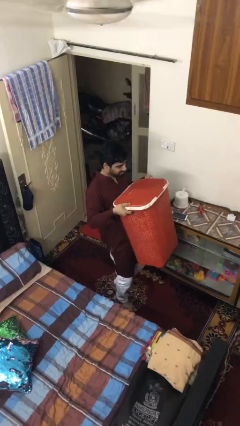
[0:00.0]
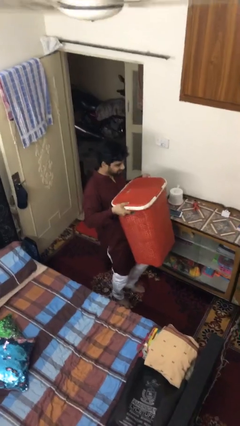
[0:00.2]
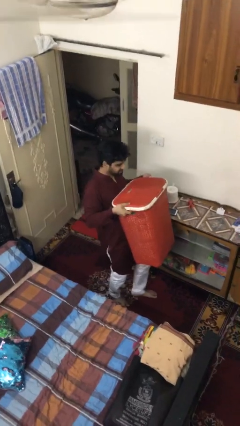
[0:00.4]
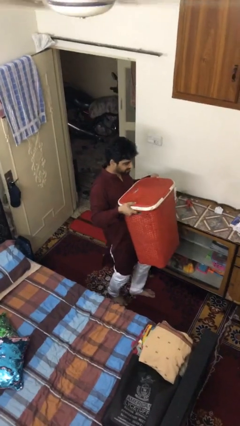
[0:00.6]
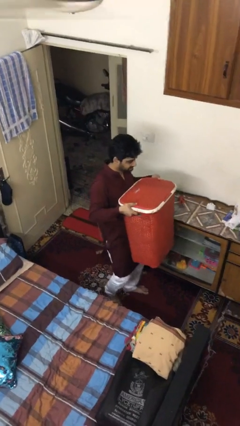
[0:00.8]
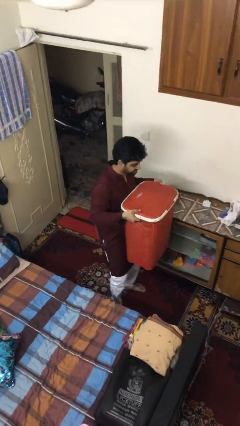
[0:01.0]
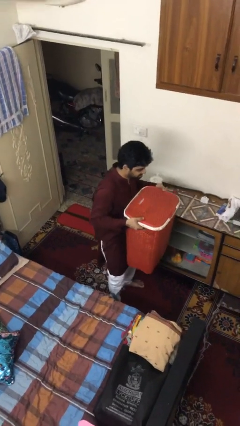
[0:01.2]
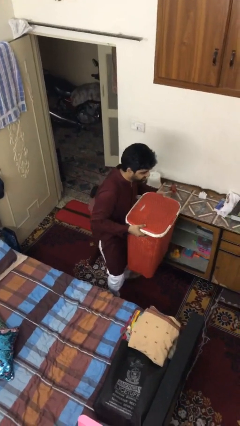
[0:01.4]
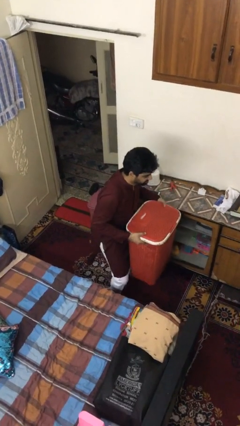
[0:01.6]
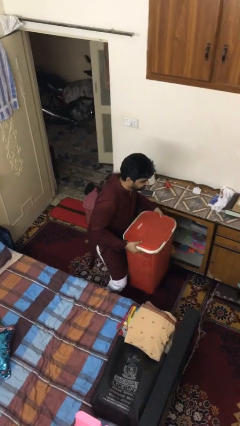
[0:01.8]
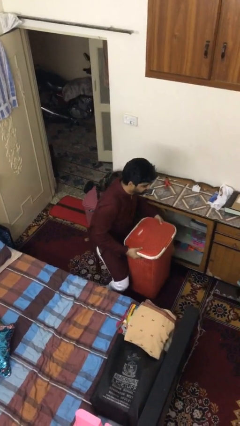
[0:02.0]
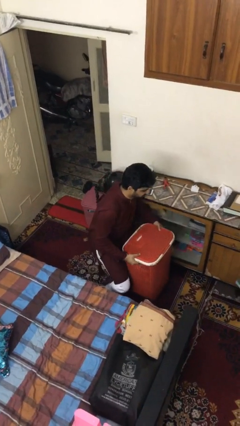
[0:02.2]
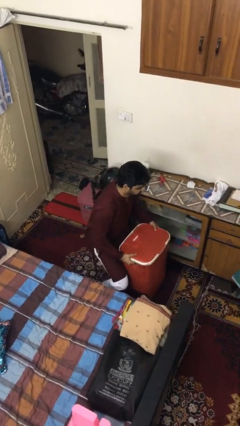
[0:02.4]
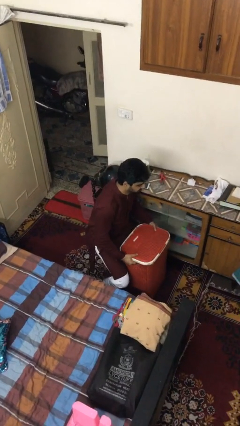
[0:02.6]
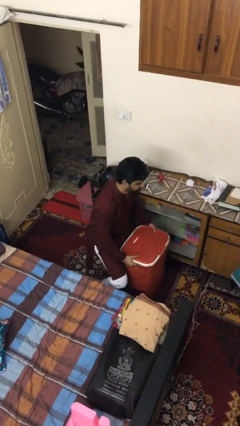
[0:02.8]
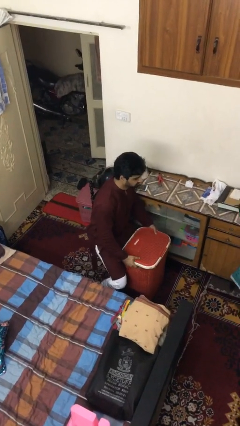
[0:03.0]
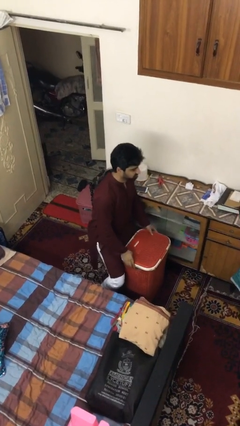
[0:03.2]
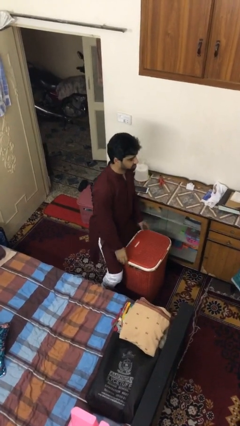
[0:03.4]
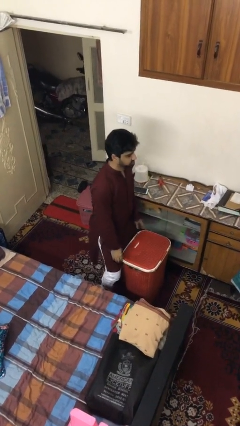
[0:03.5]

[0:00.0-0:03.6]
person puts down object on floor

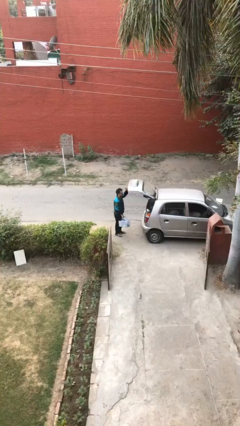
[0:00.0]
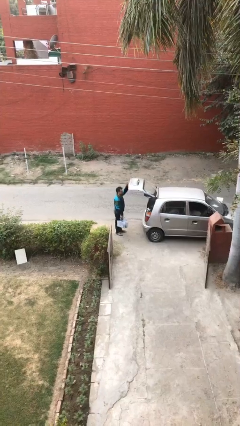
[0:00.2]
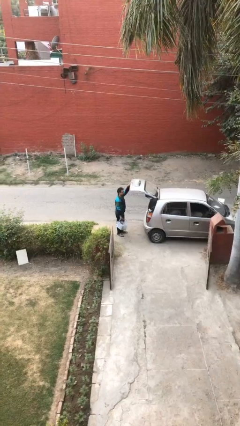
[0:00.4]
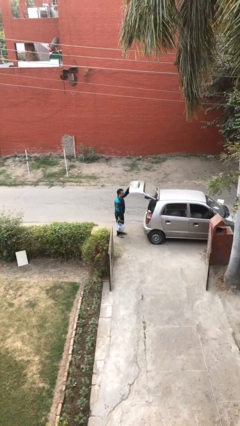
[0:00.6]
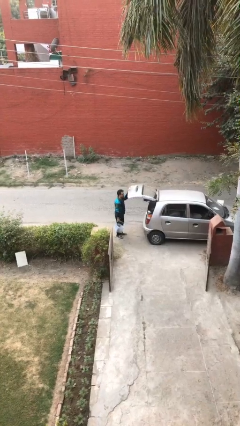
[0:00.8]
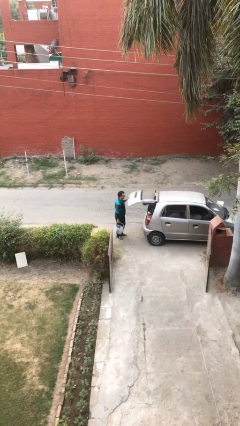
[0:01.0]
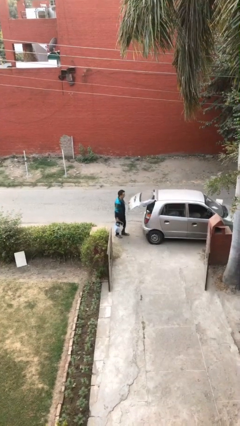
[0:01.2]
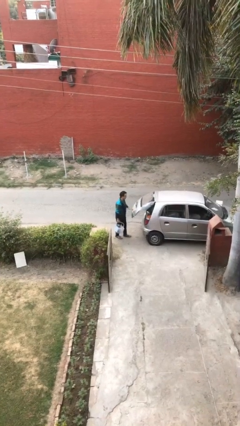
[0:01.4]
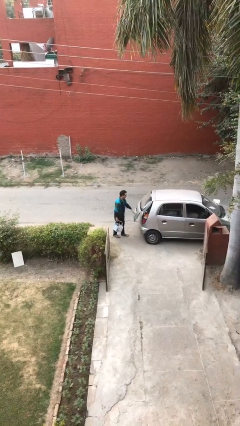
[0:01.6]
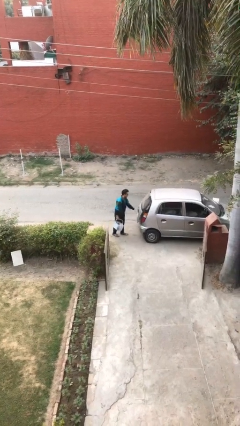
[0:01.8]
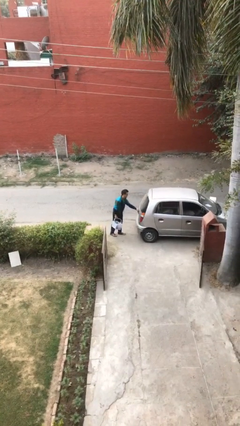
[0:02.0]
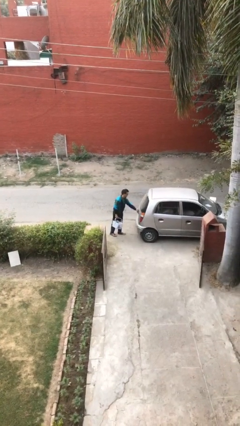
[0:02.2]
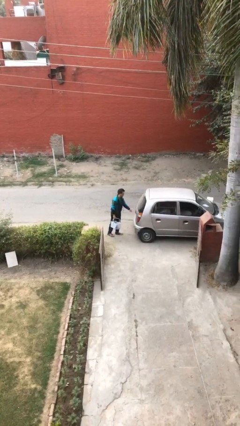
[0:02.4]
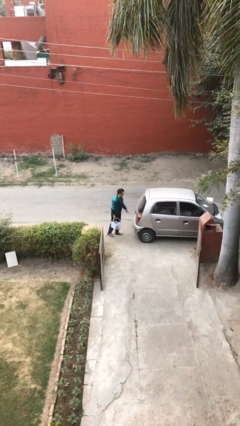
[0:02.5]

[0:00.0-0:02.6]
person closes car trunk

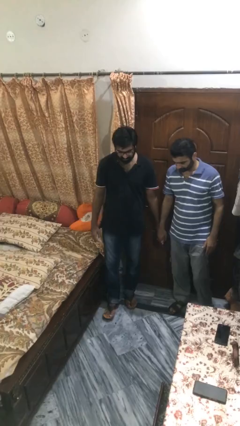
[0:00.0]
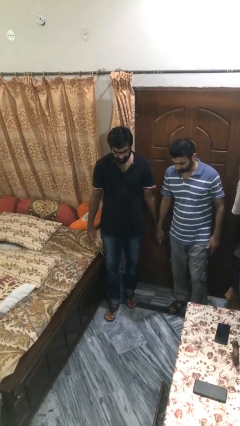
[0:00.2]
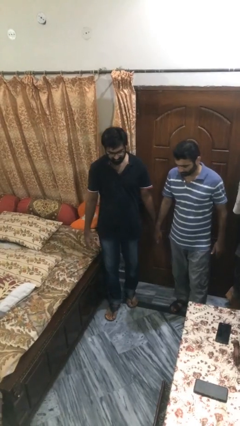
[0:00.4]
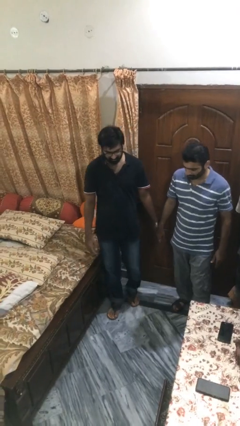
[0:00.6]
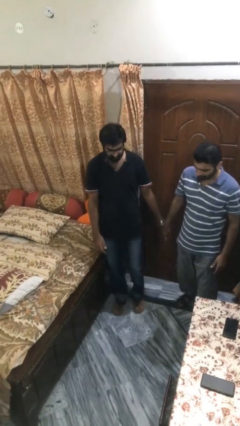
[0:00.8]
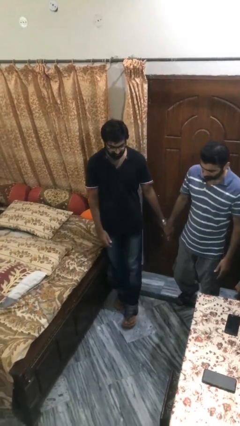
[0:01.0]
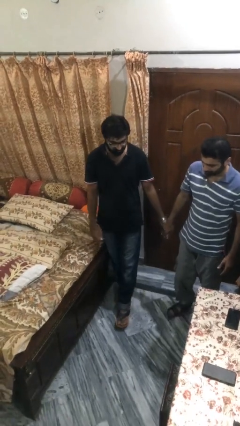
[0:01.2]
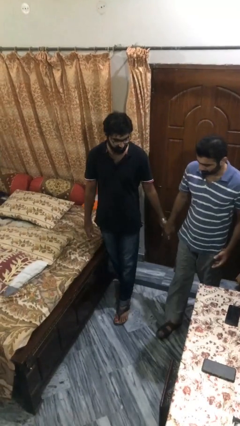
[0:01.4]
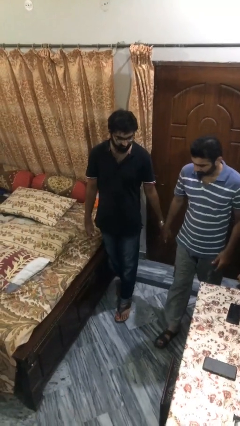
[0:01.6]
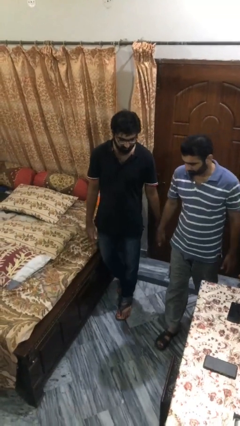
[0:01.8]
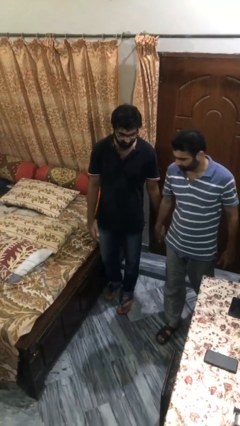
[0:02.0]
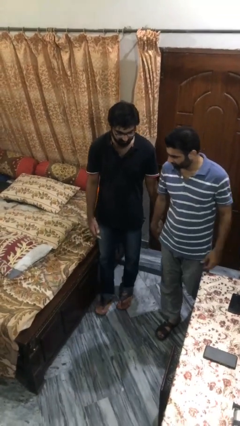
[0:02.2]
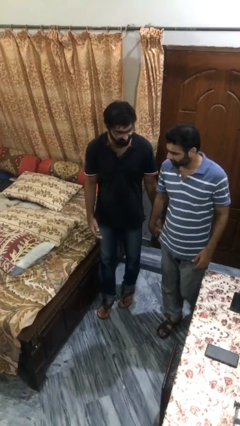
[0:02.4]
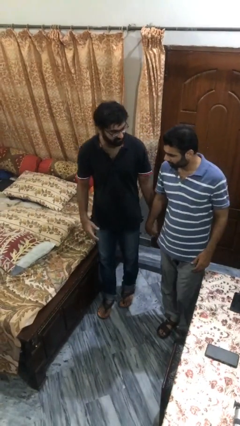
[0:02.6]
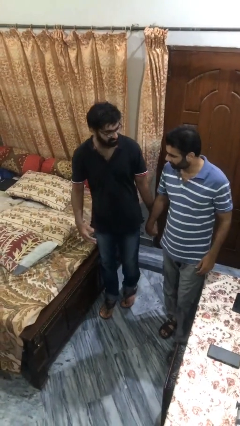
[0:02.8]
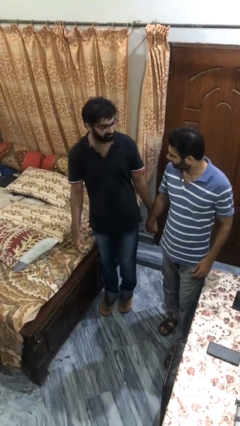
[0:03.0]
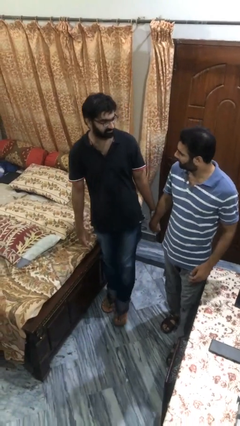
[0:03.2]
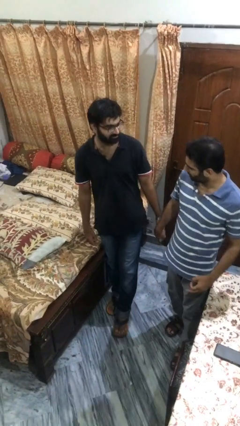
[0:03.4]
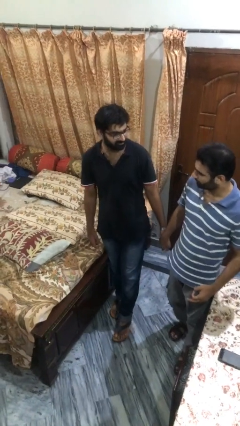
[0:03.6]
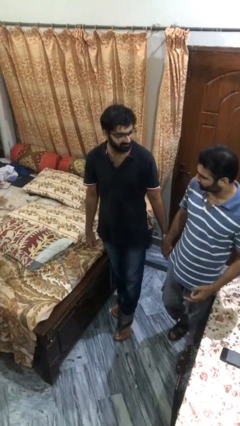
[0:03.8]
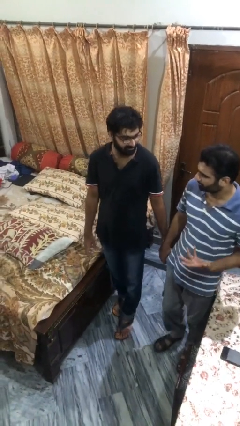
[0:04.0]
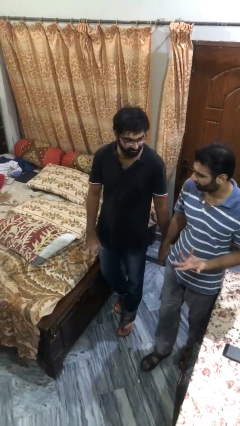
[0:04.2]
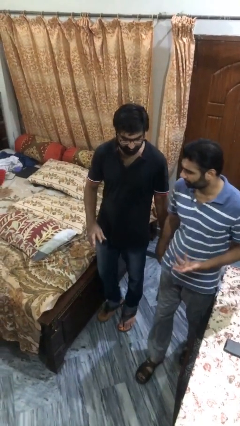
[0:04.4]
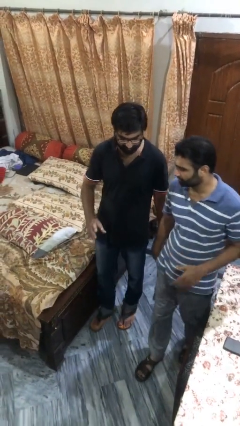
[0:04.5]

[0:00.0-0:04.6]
person holds hand

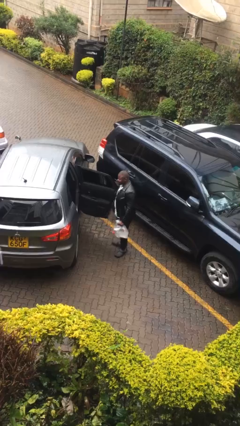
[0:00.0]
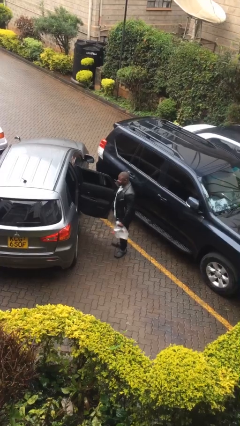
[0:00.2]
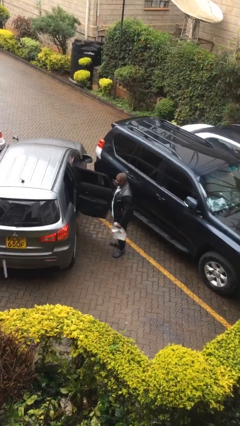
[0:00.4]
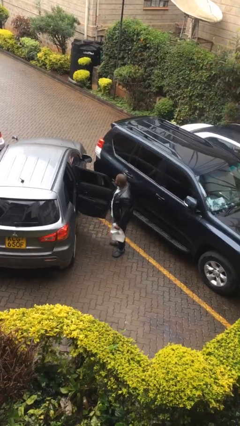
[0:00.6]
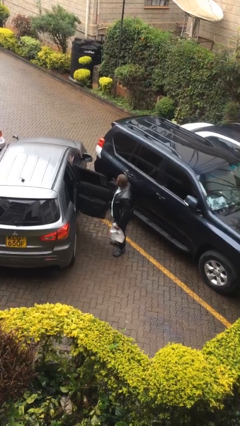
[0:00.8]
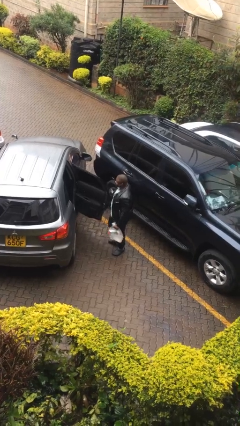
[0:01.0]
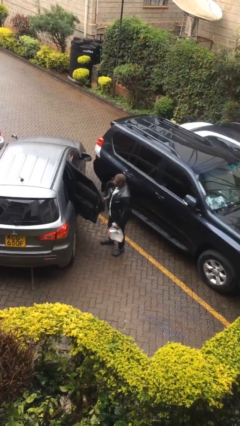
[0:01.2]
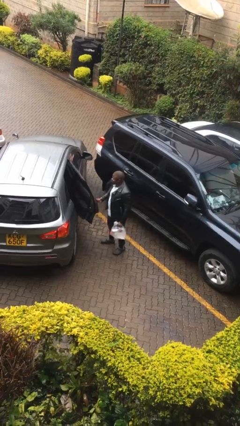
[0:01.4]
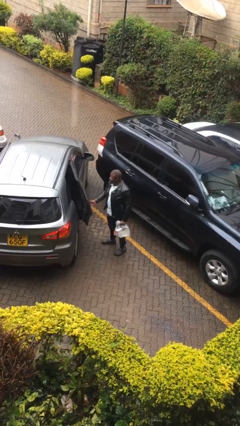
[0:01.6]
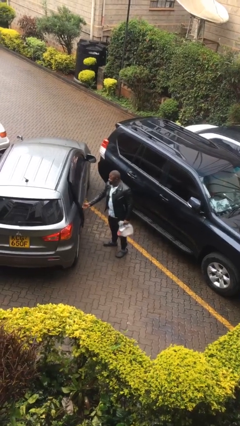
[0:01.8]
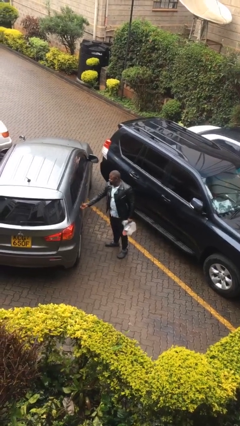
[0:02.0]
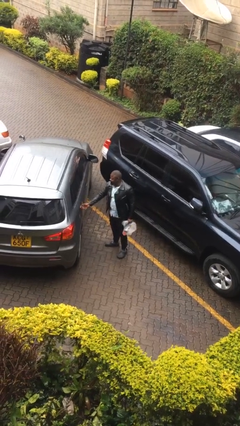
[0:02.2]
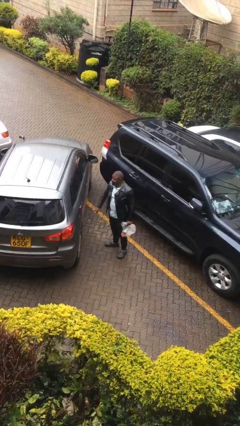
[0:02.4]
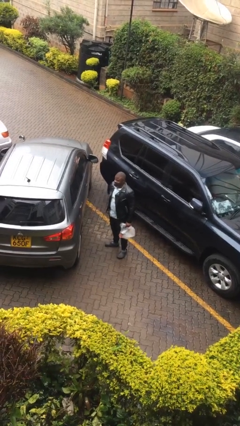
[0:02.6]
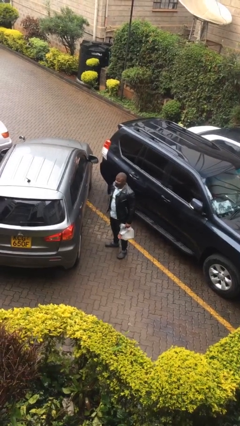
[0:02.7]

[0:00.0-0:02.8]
person closes car door

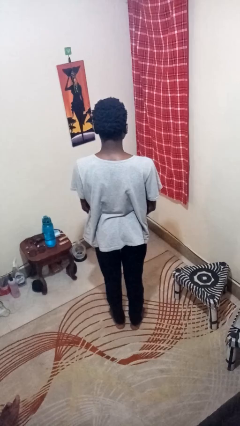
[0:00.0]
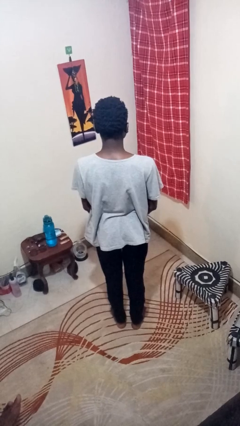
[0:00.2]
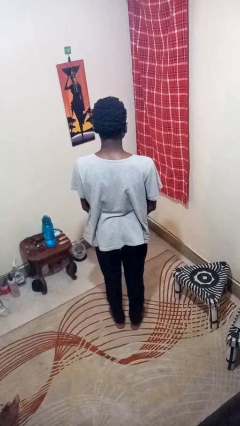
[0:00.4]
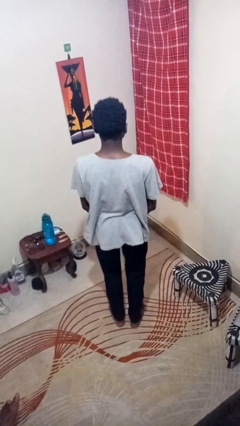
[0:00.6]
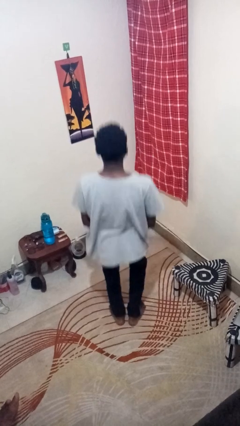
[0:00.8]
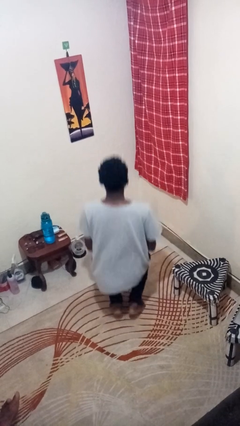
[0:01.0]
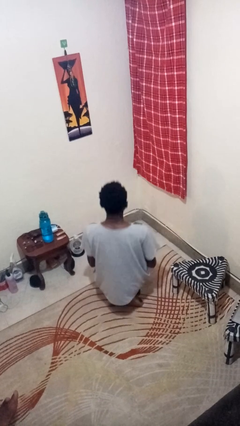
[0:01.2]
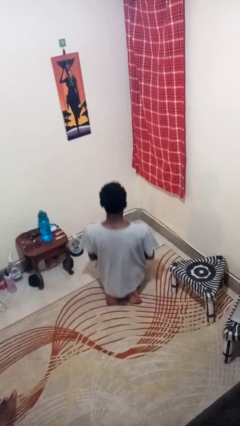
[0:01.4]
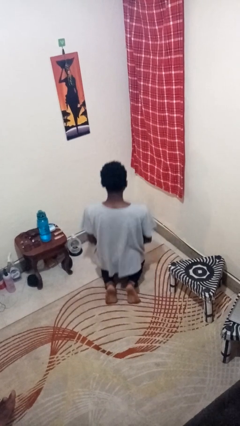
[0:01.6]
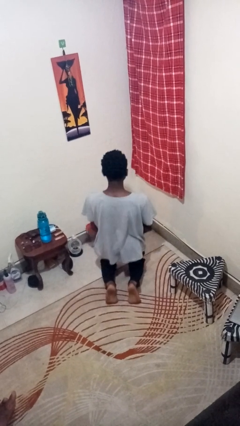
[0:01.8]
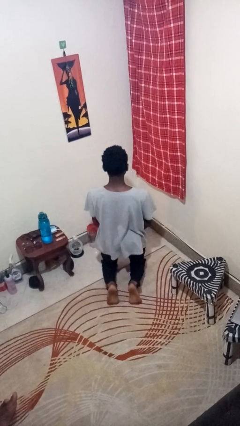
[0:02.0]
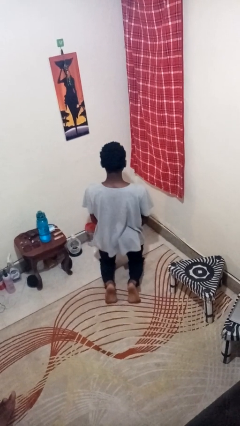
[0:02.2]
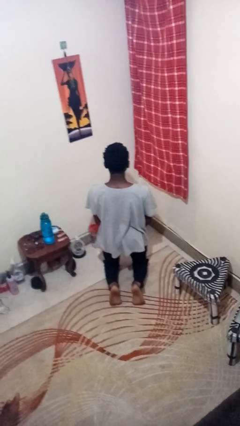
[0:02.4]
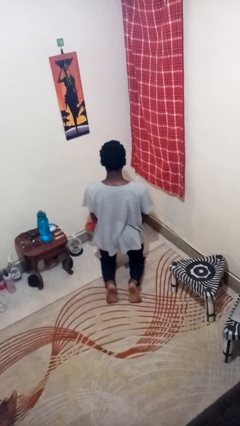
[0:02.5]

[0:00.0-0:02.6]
person kneels

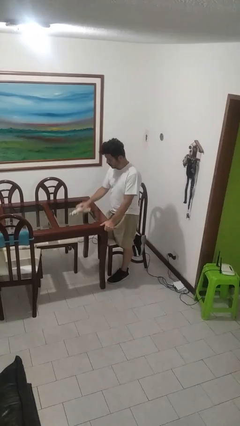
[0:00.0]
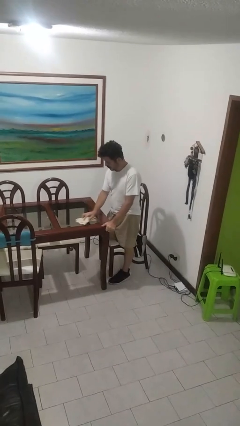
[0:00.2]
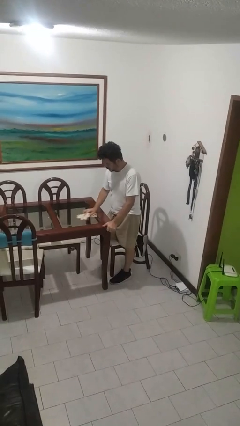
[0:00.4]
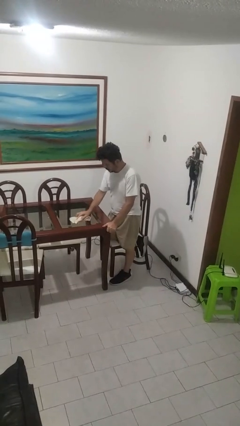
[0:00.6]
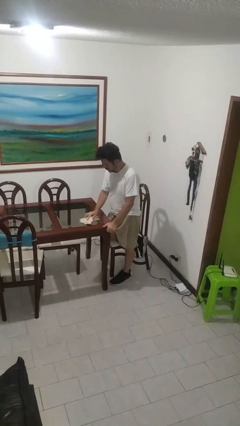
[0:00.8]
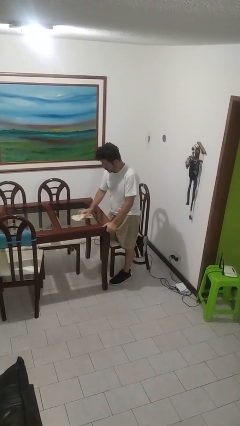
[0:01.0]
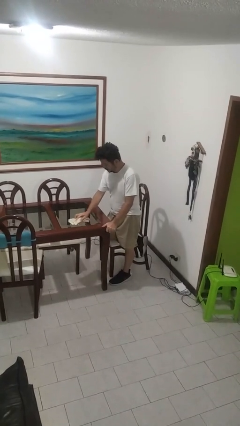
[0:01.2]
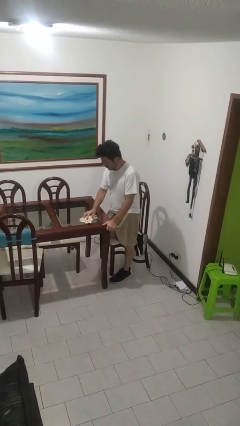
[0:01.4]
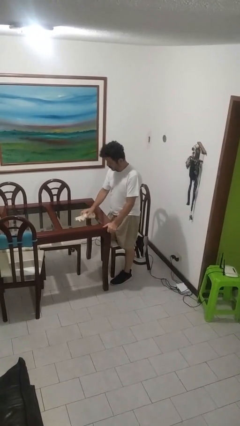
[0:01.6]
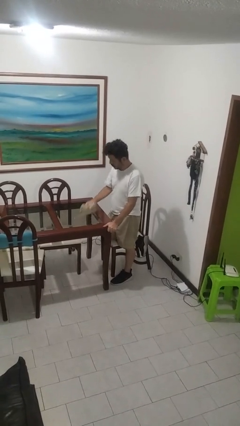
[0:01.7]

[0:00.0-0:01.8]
person cleans table with rag
